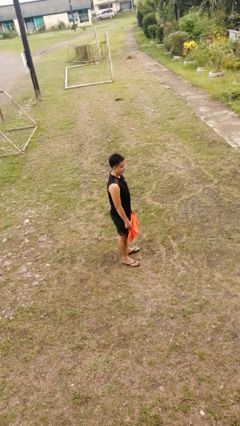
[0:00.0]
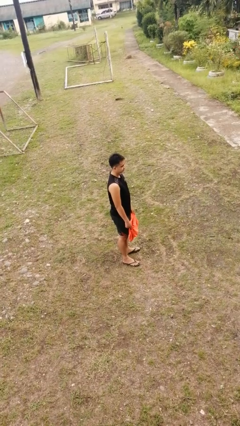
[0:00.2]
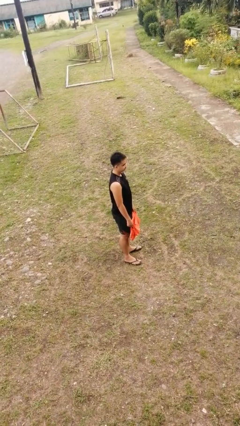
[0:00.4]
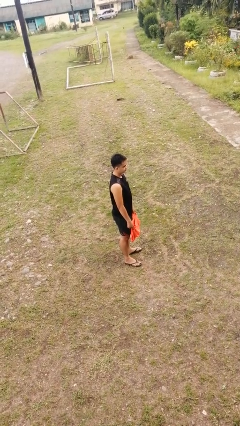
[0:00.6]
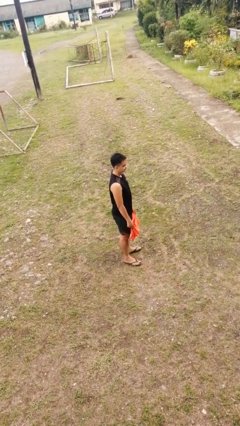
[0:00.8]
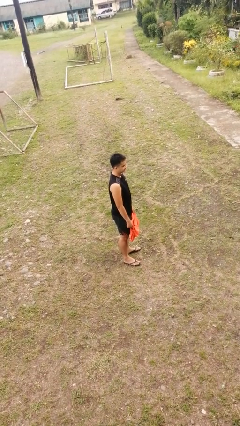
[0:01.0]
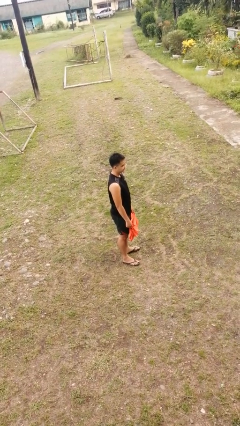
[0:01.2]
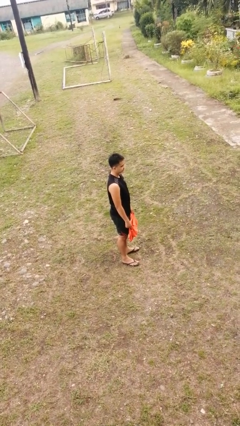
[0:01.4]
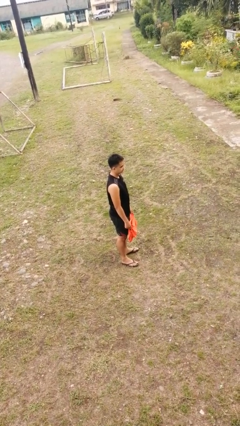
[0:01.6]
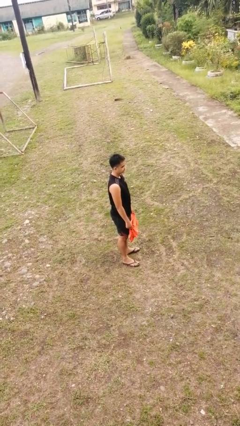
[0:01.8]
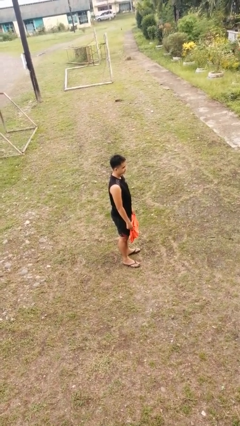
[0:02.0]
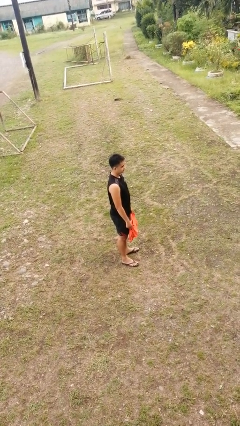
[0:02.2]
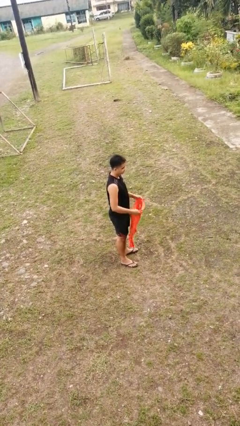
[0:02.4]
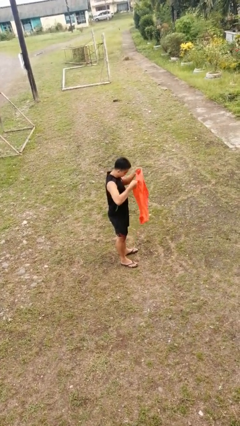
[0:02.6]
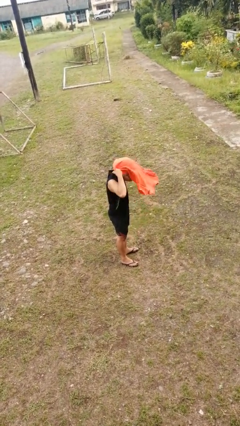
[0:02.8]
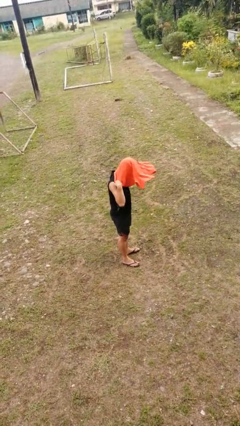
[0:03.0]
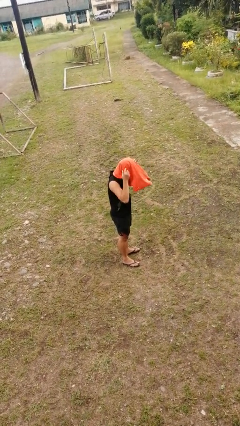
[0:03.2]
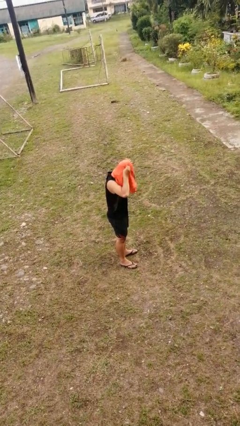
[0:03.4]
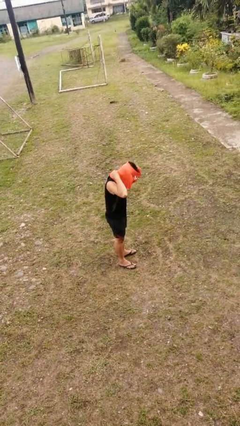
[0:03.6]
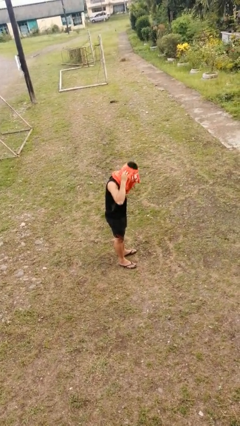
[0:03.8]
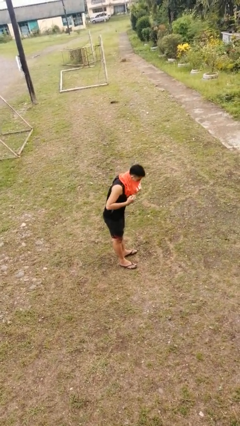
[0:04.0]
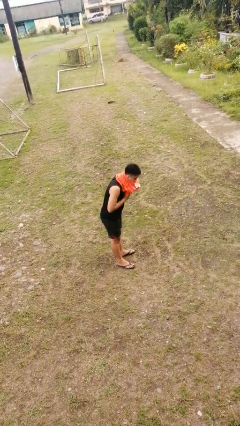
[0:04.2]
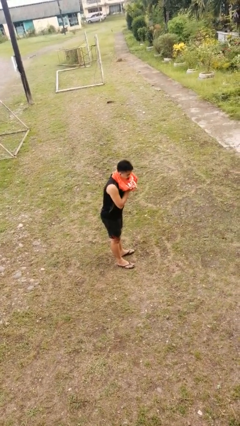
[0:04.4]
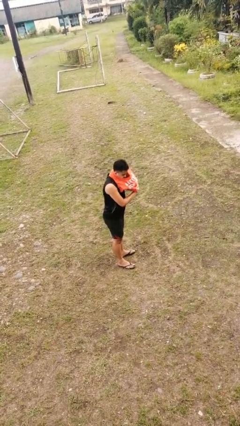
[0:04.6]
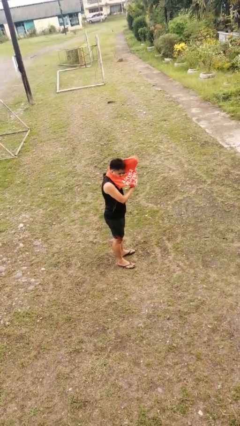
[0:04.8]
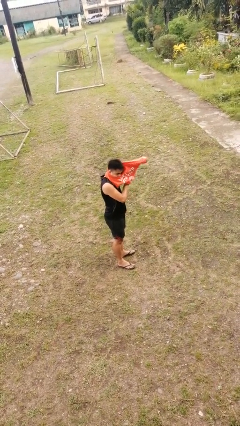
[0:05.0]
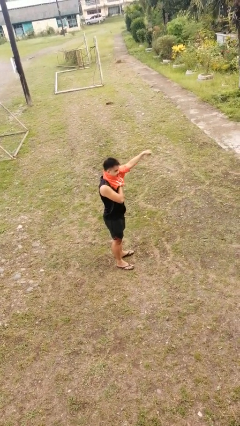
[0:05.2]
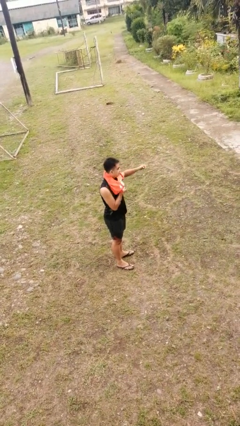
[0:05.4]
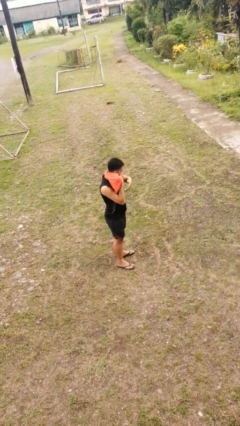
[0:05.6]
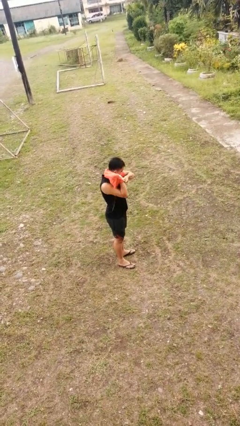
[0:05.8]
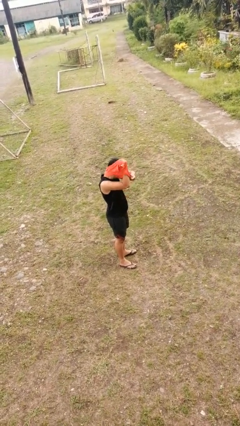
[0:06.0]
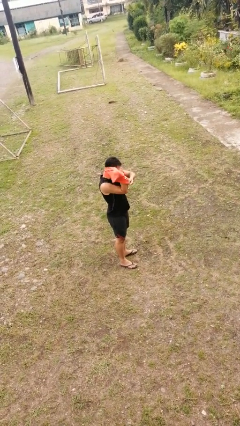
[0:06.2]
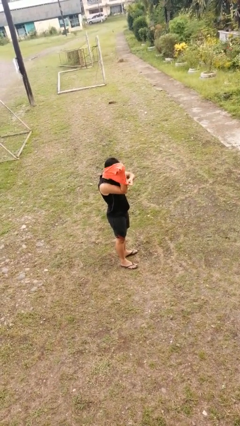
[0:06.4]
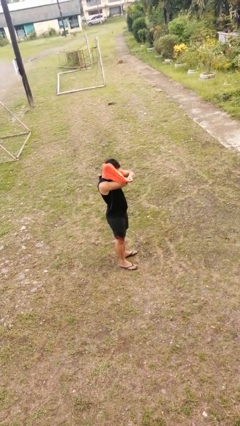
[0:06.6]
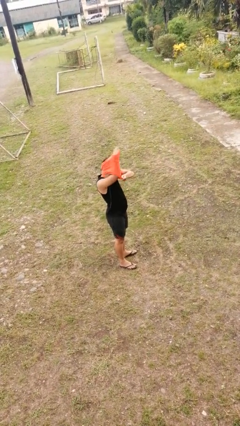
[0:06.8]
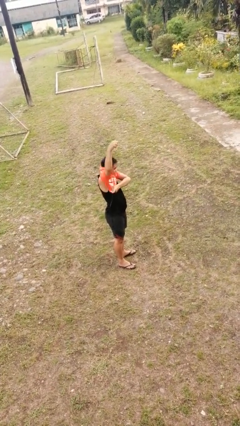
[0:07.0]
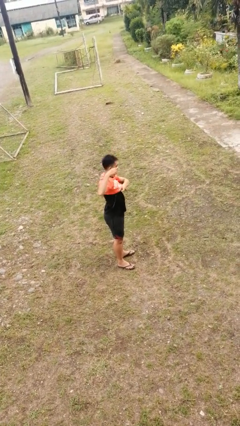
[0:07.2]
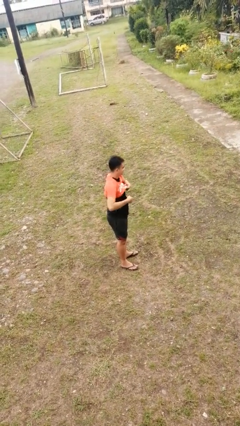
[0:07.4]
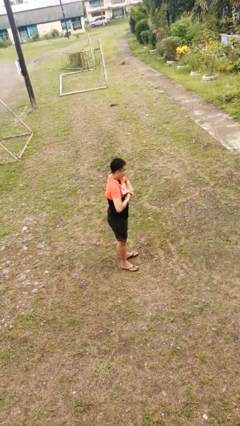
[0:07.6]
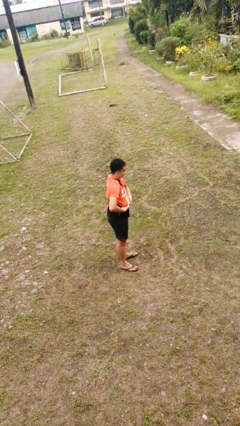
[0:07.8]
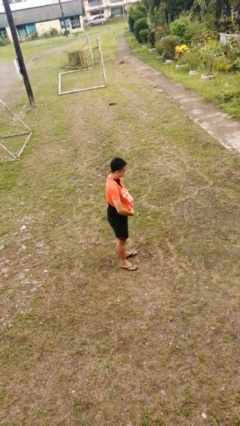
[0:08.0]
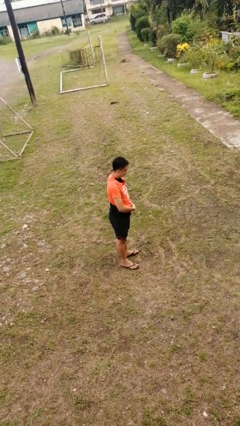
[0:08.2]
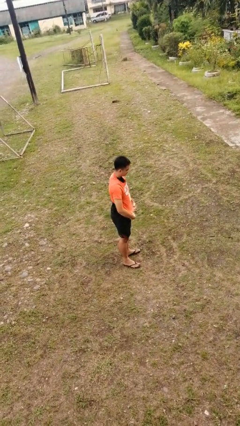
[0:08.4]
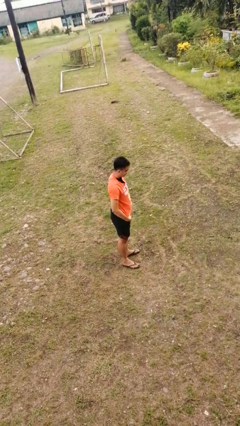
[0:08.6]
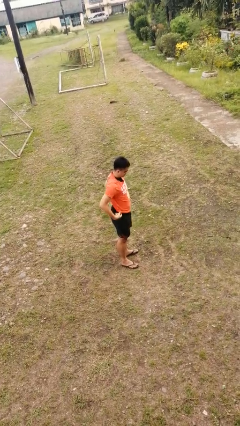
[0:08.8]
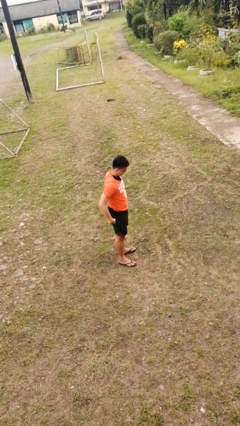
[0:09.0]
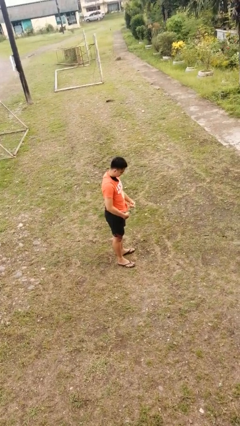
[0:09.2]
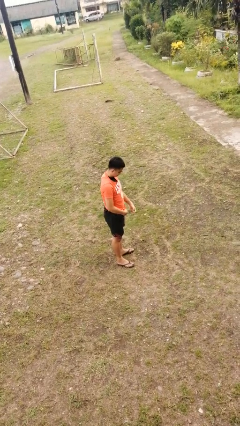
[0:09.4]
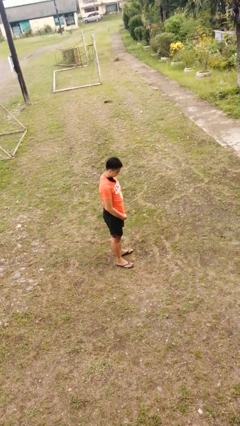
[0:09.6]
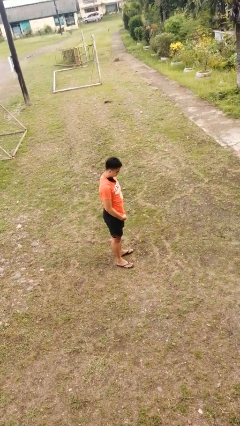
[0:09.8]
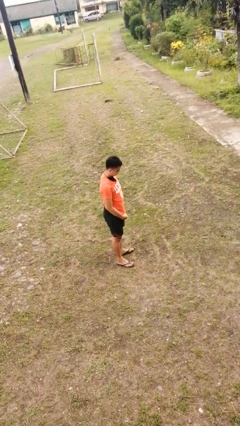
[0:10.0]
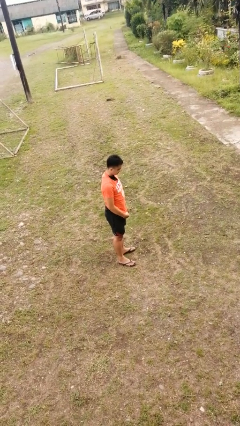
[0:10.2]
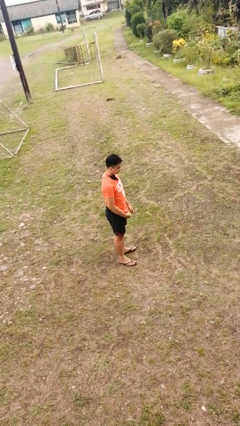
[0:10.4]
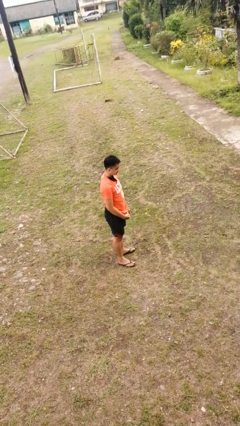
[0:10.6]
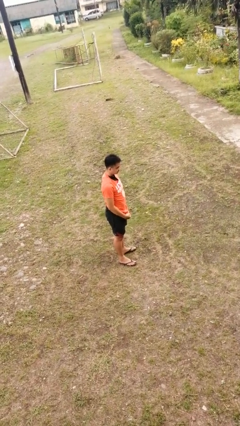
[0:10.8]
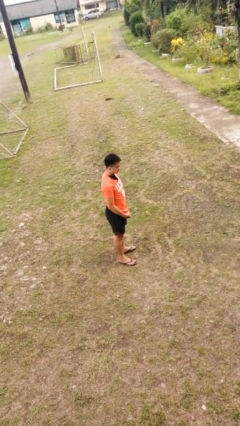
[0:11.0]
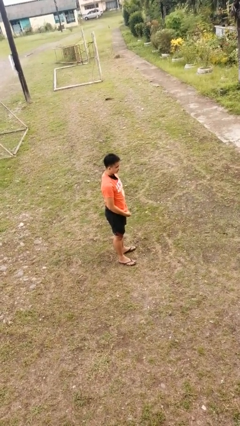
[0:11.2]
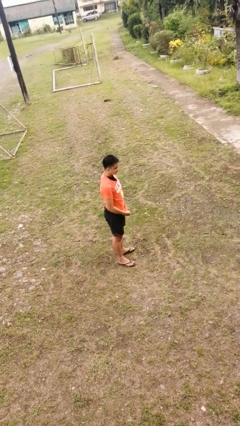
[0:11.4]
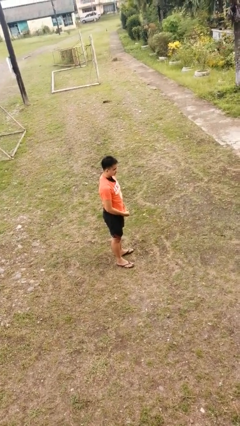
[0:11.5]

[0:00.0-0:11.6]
person puts on shirt

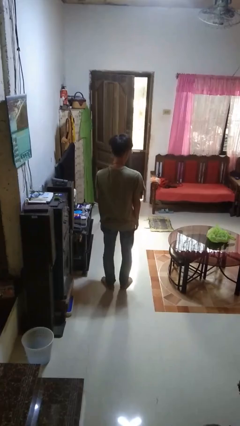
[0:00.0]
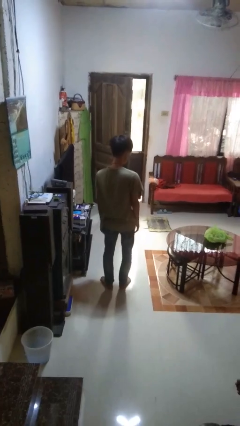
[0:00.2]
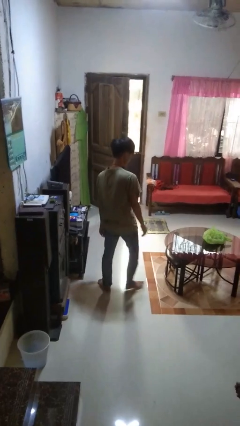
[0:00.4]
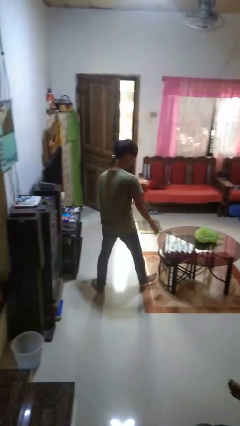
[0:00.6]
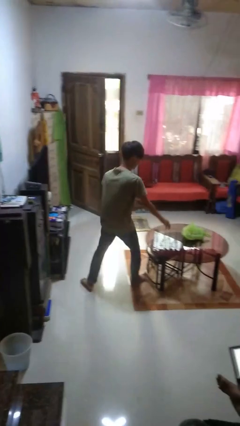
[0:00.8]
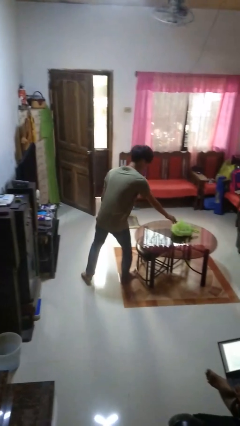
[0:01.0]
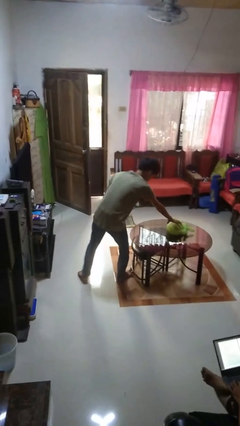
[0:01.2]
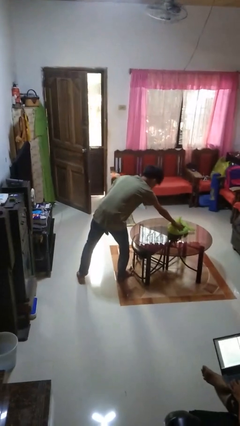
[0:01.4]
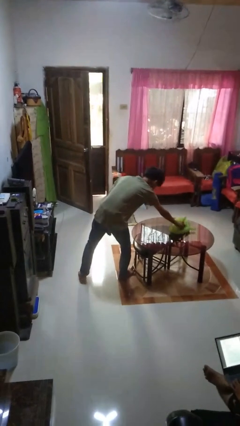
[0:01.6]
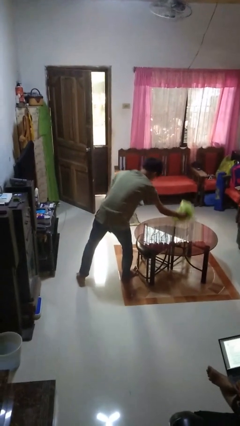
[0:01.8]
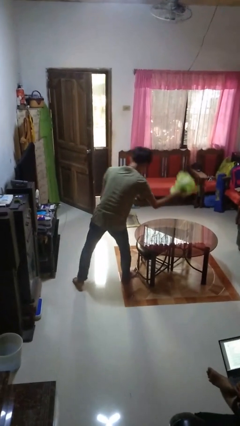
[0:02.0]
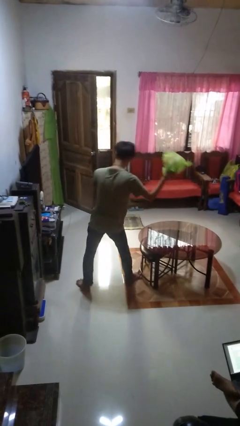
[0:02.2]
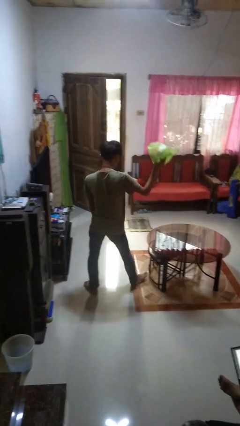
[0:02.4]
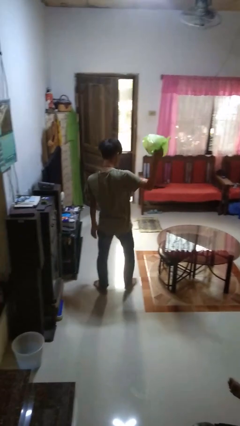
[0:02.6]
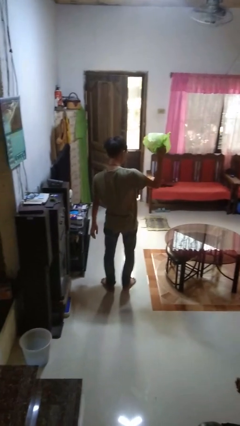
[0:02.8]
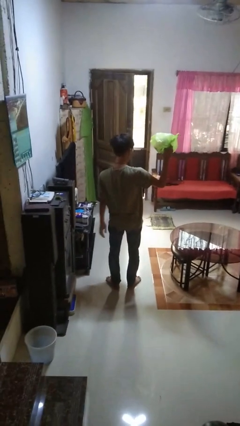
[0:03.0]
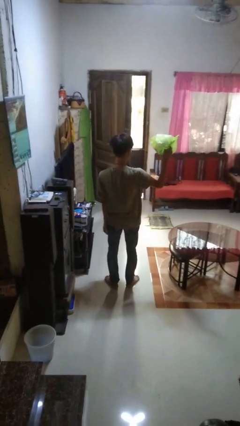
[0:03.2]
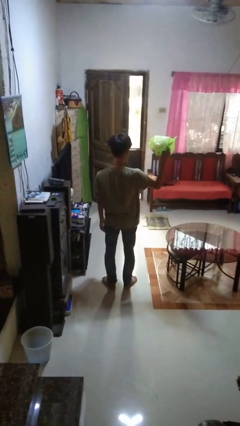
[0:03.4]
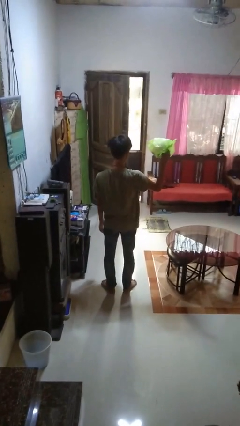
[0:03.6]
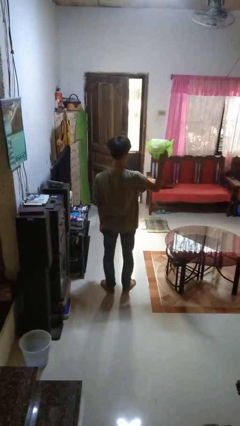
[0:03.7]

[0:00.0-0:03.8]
person picks up object from table

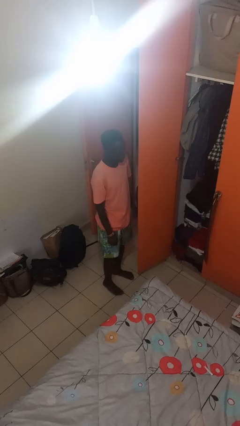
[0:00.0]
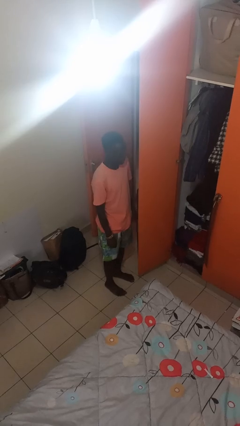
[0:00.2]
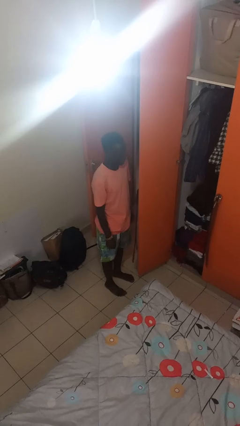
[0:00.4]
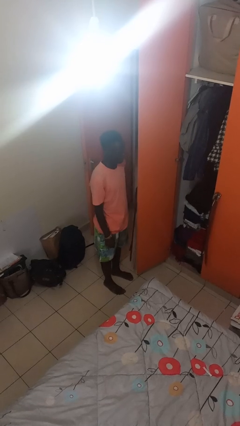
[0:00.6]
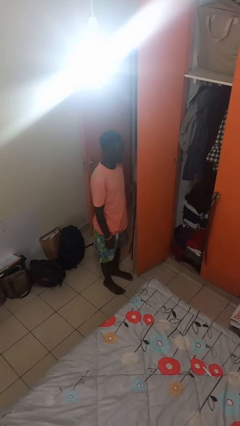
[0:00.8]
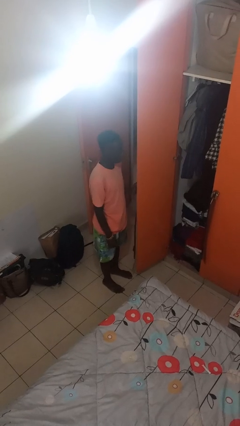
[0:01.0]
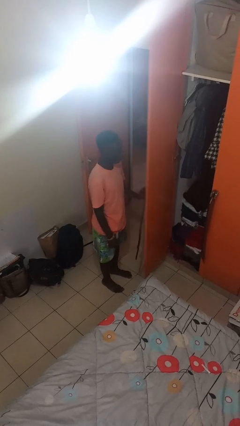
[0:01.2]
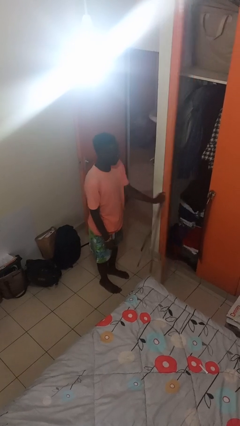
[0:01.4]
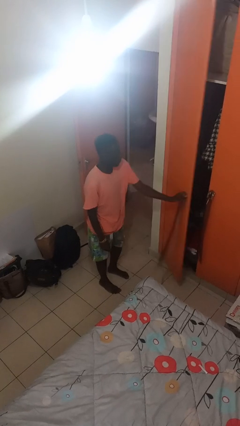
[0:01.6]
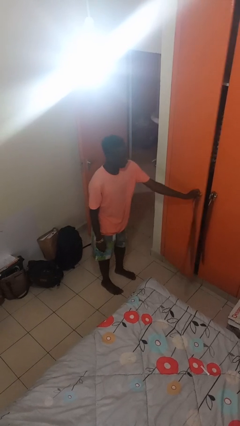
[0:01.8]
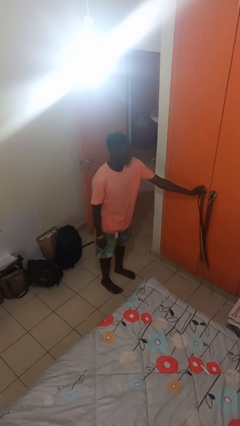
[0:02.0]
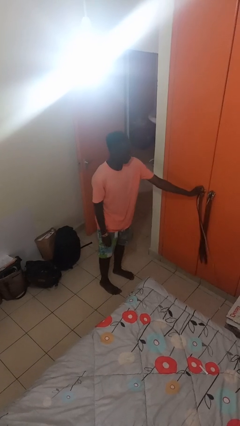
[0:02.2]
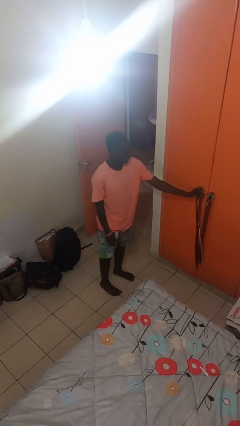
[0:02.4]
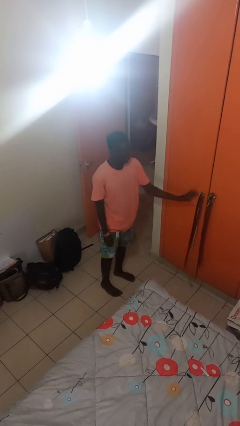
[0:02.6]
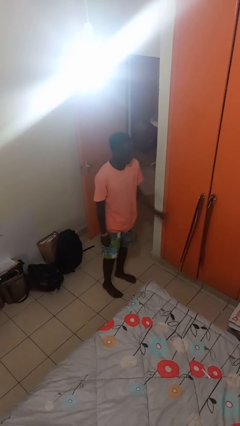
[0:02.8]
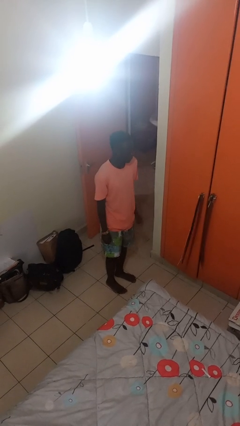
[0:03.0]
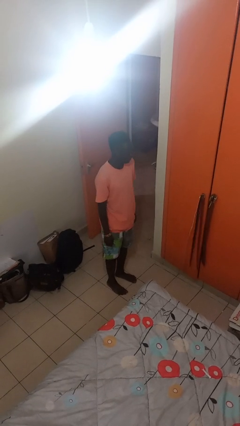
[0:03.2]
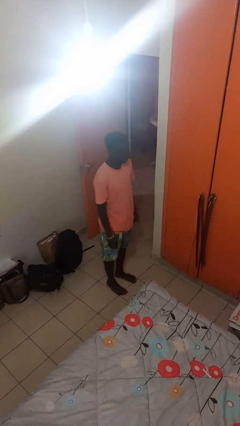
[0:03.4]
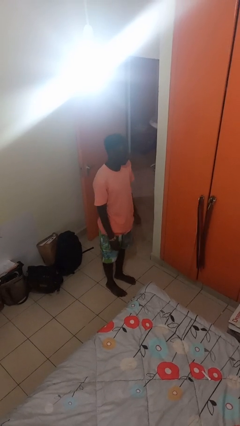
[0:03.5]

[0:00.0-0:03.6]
person closes closet door
